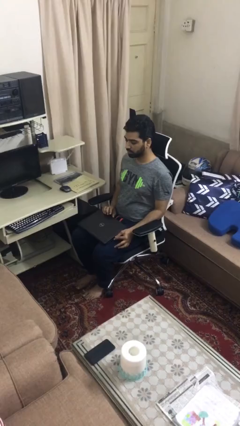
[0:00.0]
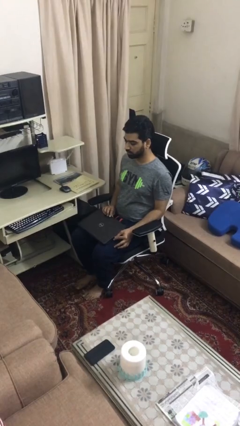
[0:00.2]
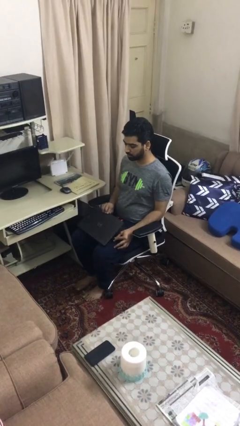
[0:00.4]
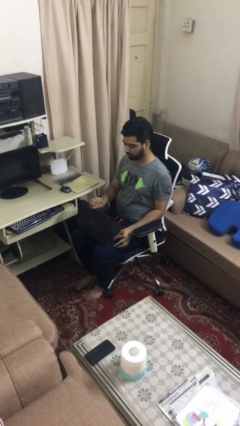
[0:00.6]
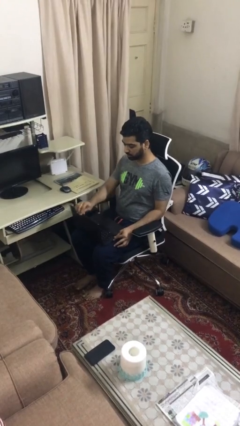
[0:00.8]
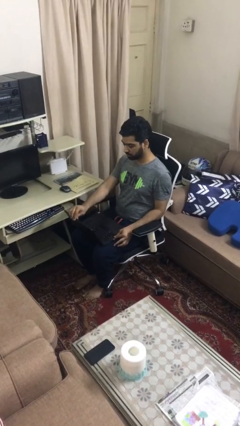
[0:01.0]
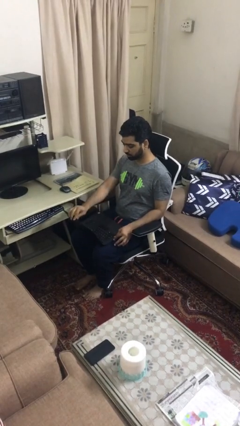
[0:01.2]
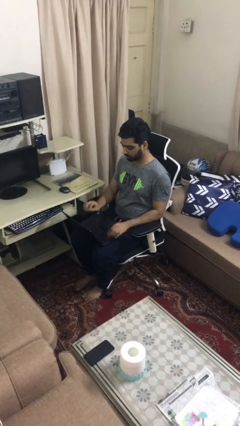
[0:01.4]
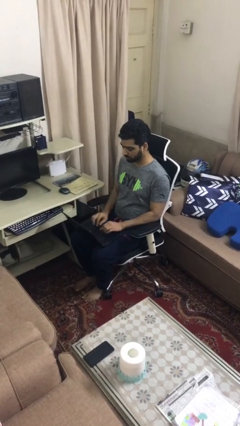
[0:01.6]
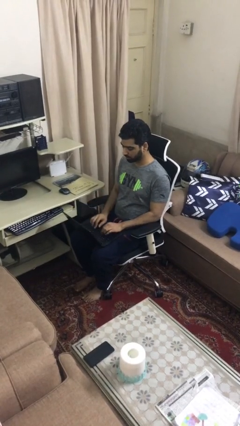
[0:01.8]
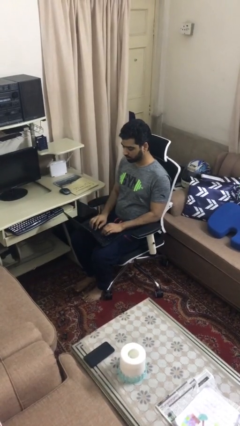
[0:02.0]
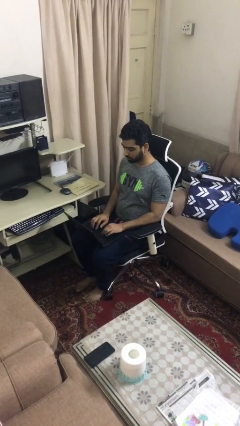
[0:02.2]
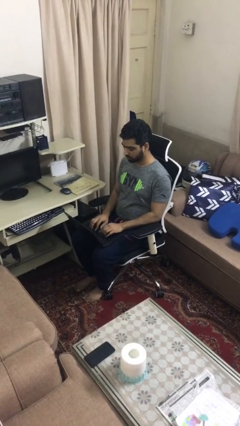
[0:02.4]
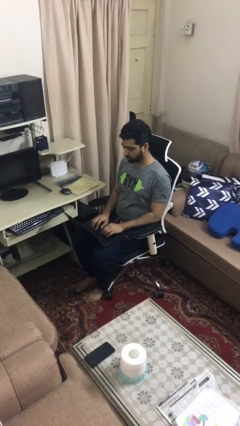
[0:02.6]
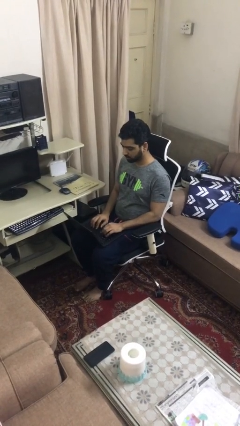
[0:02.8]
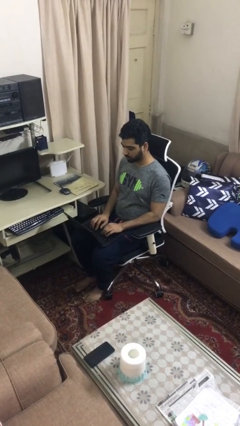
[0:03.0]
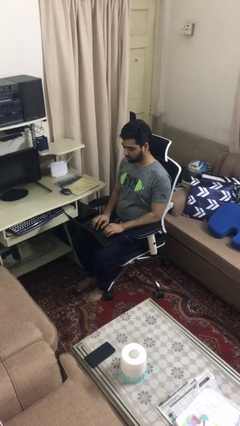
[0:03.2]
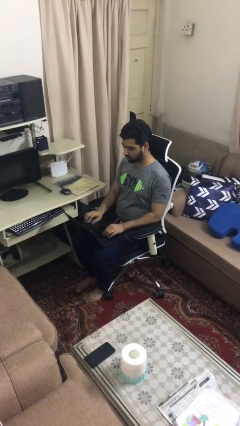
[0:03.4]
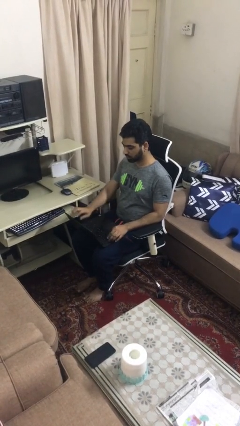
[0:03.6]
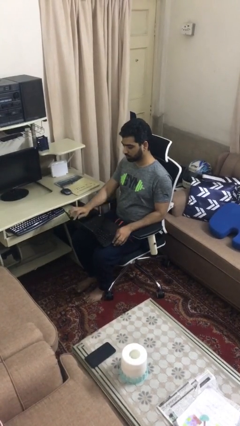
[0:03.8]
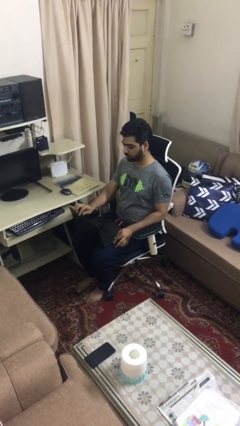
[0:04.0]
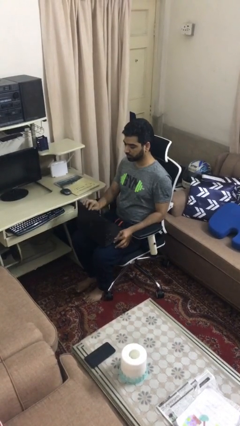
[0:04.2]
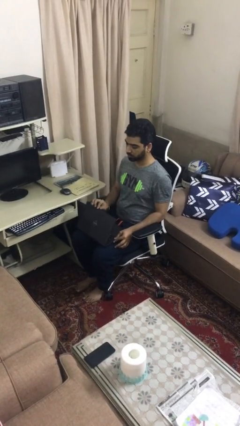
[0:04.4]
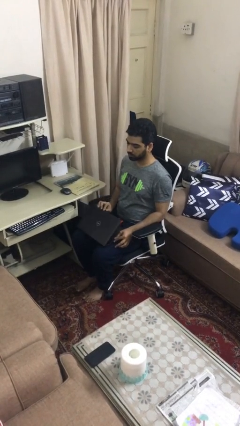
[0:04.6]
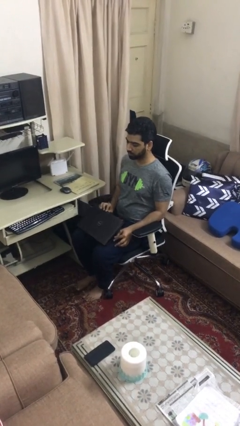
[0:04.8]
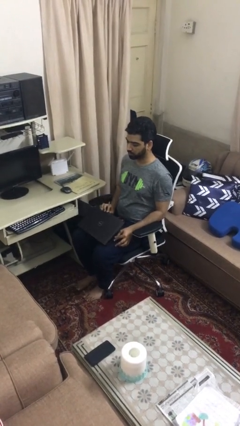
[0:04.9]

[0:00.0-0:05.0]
person interacts with laptop

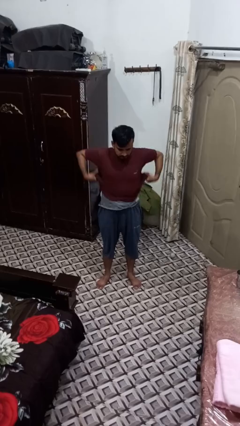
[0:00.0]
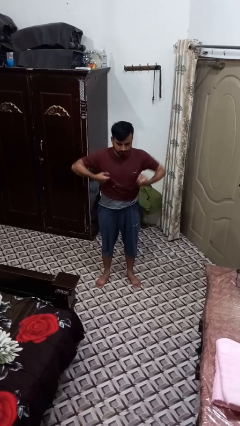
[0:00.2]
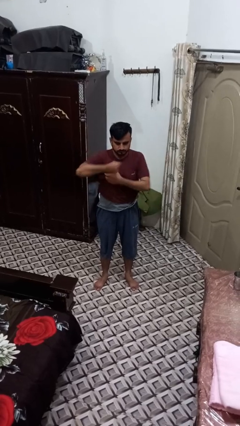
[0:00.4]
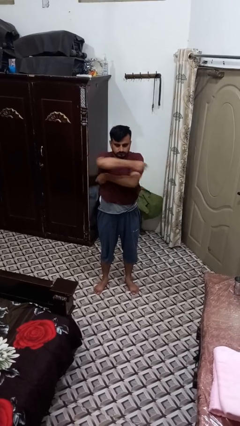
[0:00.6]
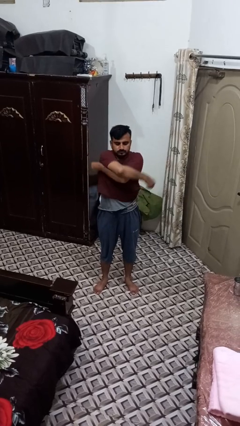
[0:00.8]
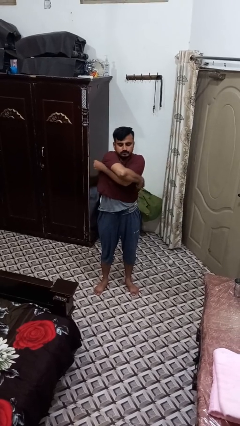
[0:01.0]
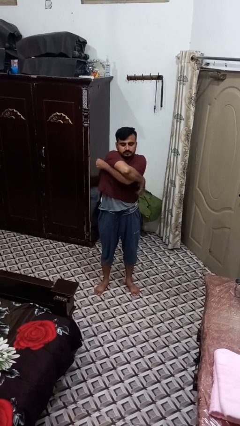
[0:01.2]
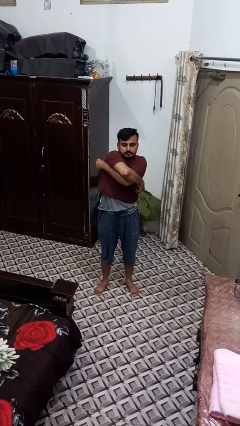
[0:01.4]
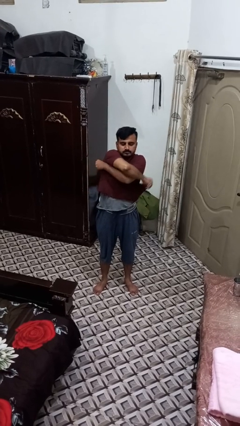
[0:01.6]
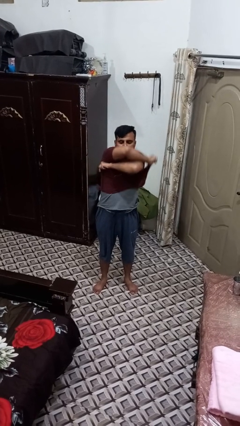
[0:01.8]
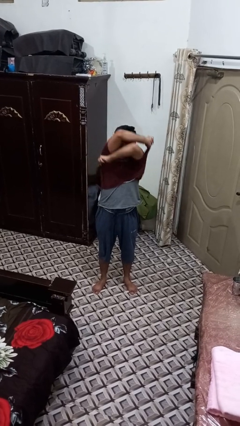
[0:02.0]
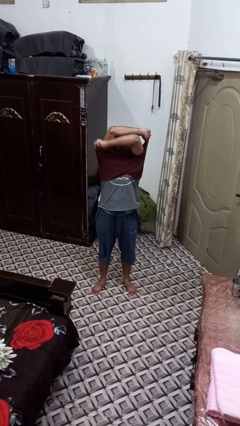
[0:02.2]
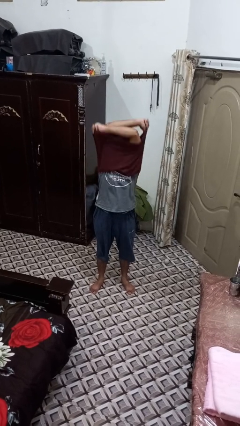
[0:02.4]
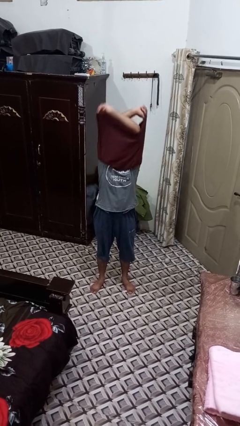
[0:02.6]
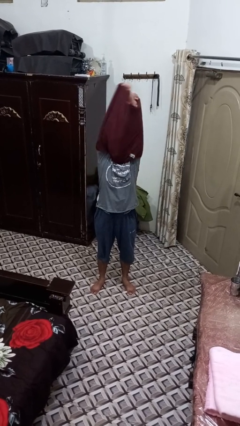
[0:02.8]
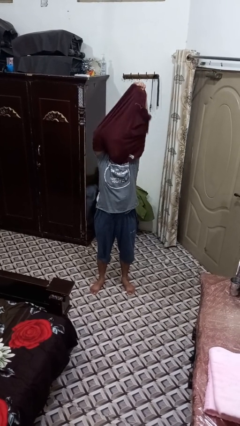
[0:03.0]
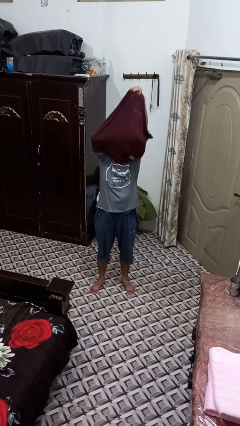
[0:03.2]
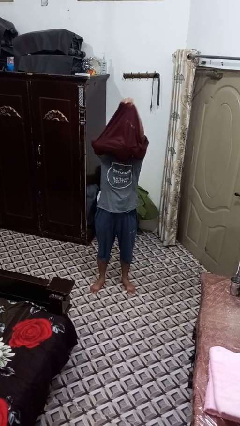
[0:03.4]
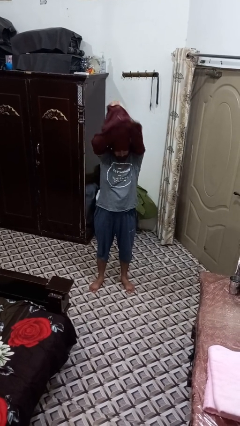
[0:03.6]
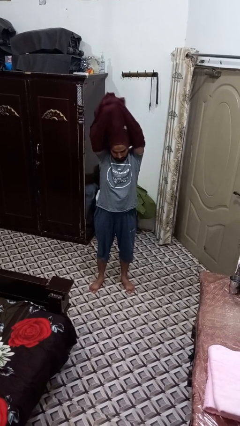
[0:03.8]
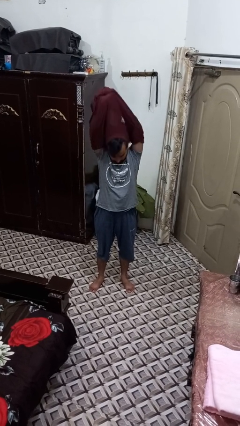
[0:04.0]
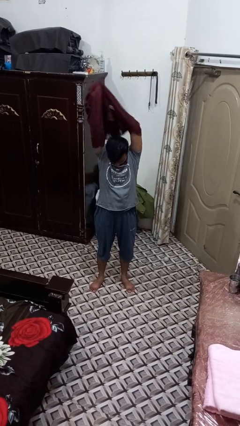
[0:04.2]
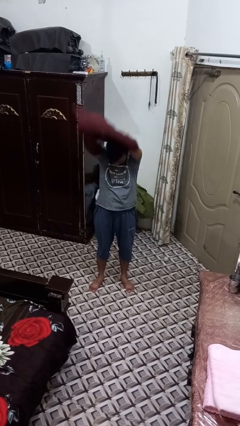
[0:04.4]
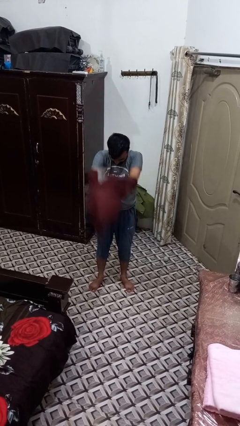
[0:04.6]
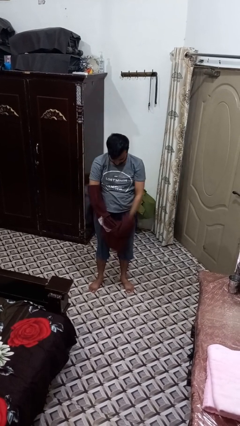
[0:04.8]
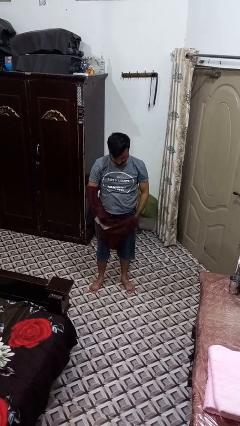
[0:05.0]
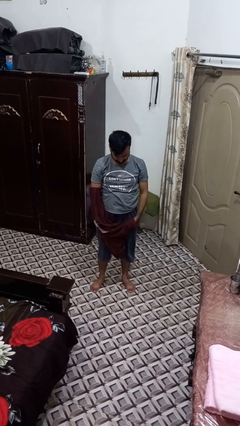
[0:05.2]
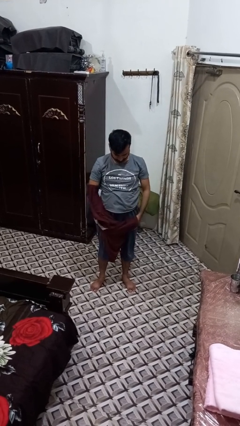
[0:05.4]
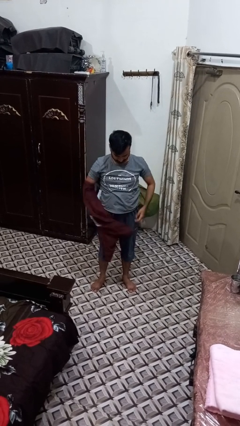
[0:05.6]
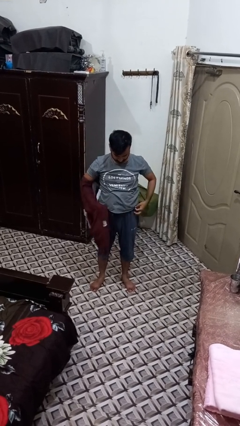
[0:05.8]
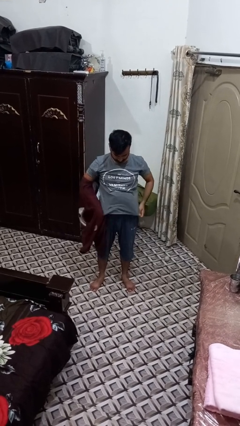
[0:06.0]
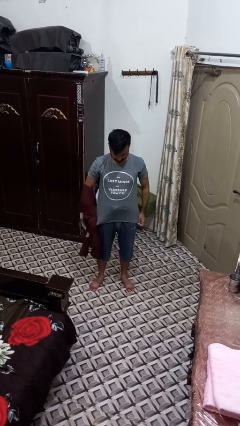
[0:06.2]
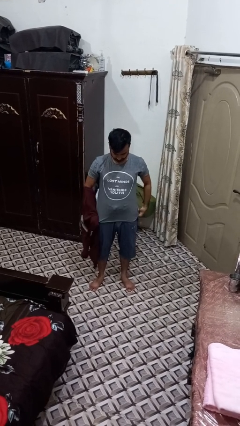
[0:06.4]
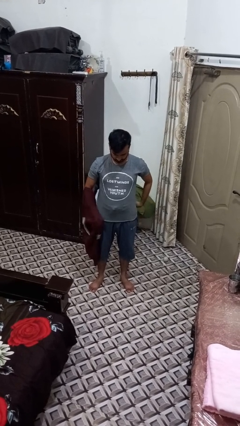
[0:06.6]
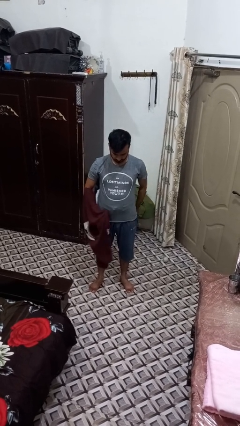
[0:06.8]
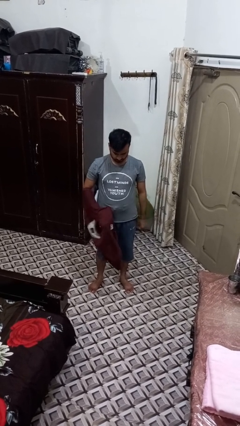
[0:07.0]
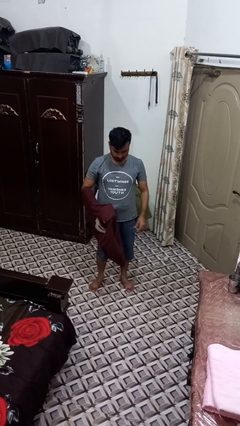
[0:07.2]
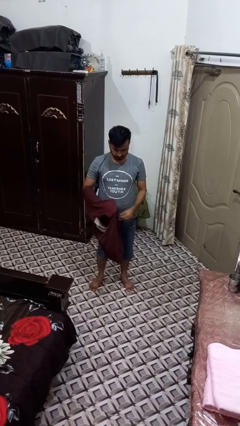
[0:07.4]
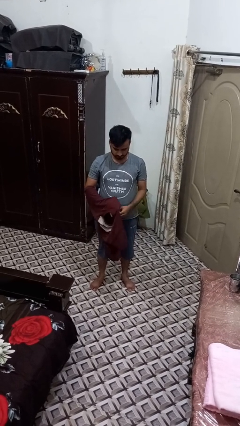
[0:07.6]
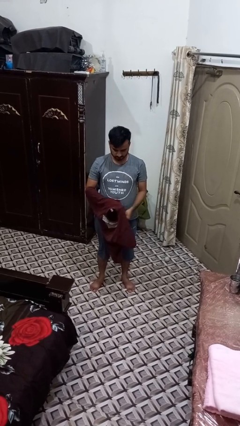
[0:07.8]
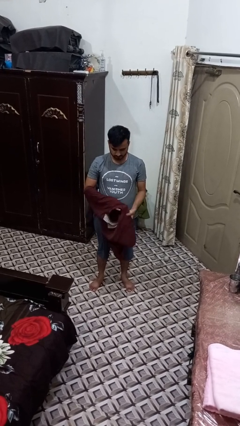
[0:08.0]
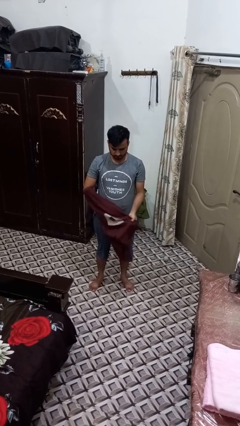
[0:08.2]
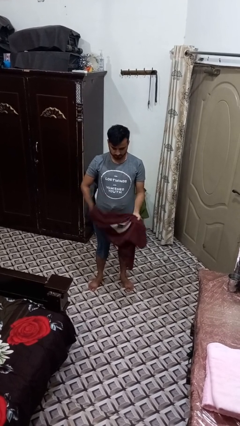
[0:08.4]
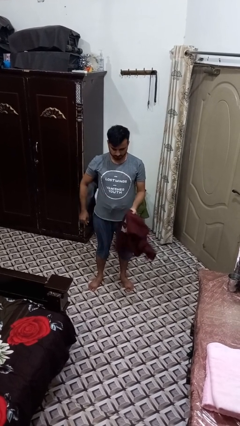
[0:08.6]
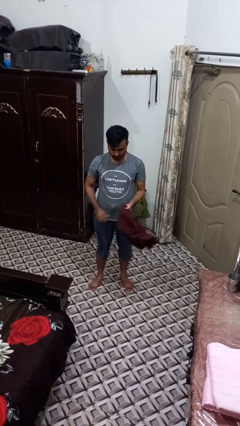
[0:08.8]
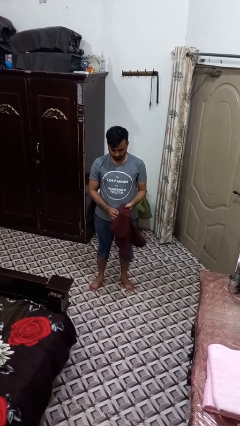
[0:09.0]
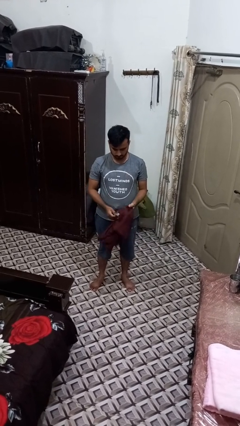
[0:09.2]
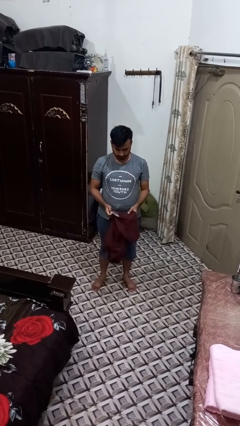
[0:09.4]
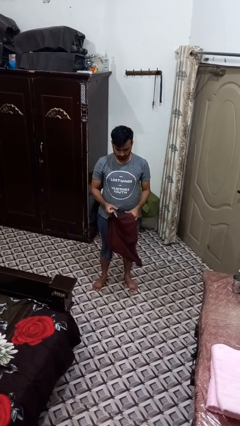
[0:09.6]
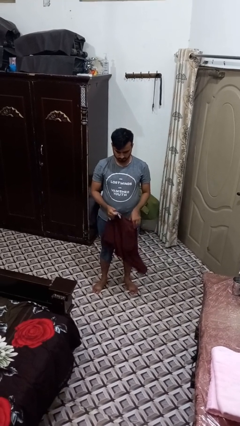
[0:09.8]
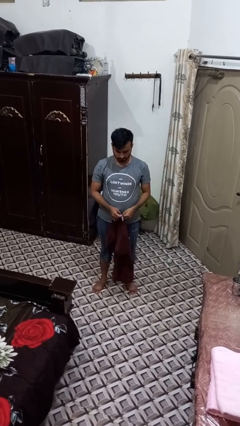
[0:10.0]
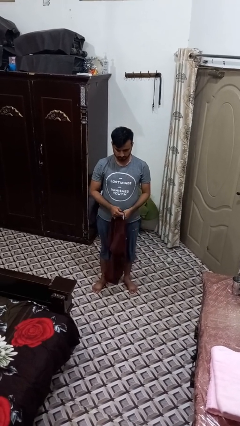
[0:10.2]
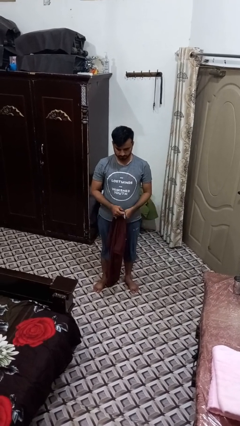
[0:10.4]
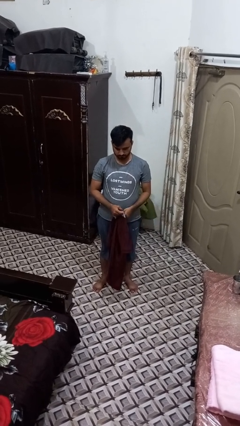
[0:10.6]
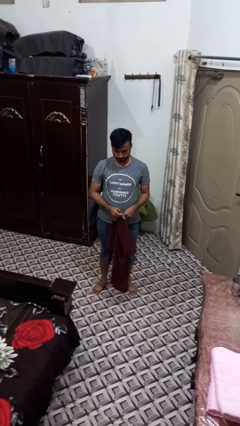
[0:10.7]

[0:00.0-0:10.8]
person takes off shirt

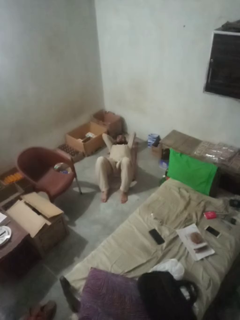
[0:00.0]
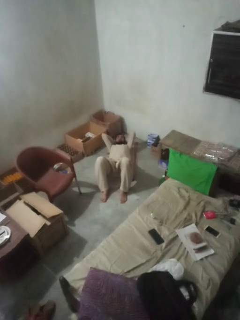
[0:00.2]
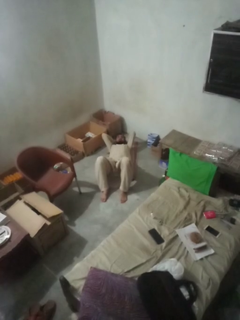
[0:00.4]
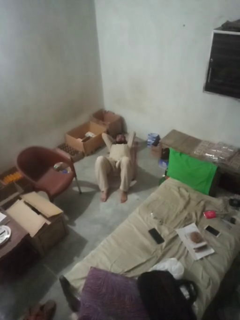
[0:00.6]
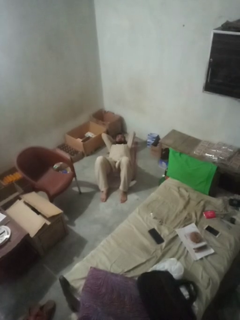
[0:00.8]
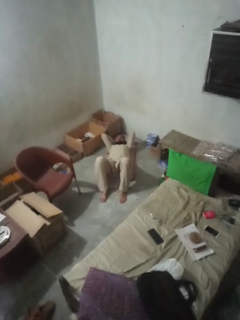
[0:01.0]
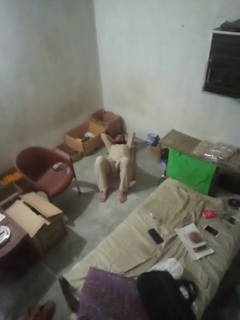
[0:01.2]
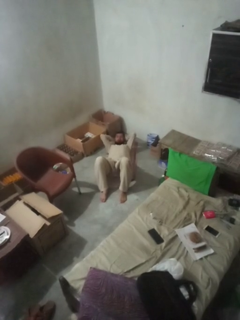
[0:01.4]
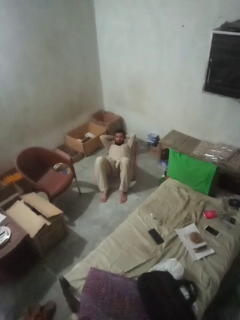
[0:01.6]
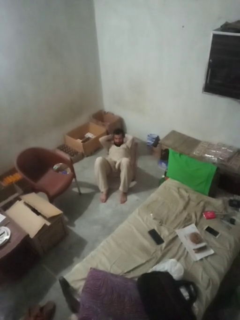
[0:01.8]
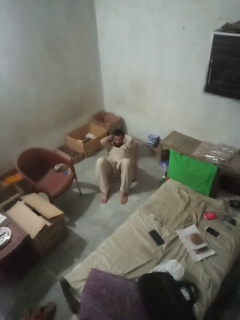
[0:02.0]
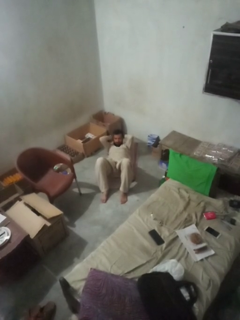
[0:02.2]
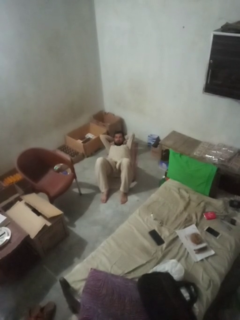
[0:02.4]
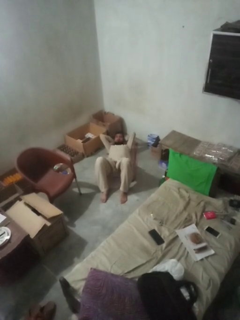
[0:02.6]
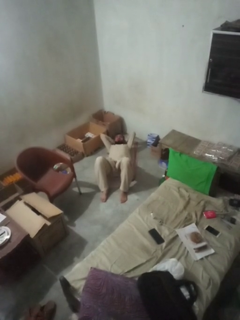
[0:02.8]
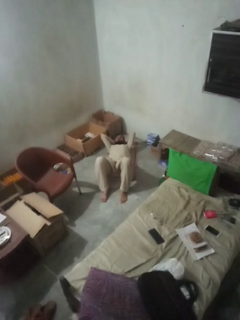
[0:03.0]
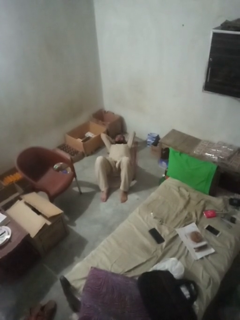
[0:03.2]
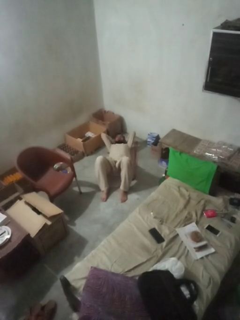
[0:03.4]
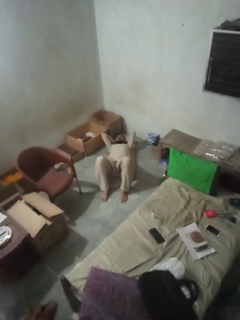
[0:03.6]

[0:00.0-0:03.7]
person exercises with situp
